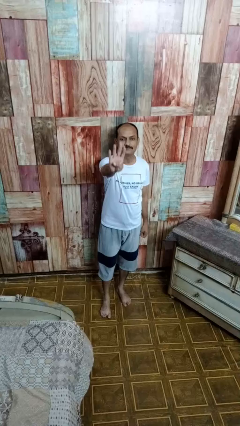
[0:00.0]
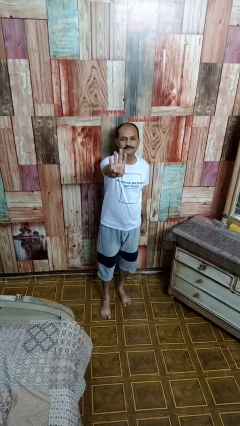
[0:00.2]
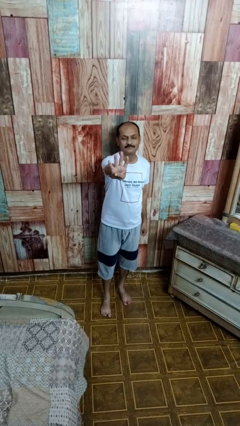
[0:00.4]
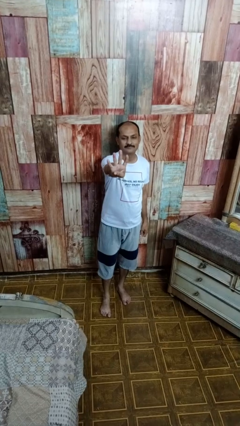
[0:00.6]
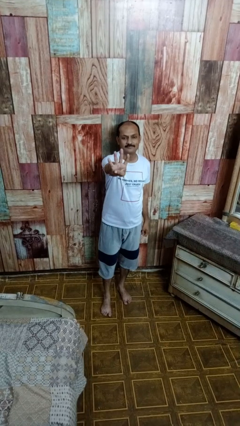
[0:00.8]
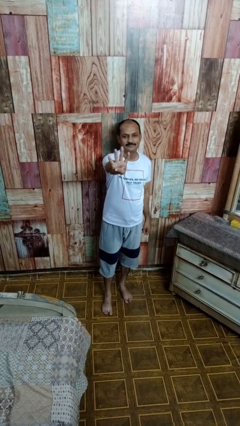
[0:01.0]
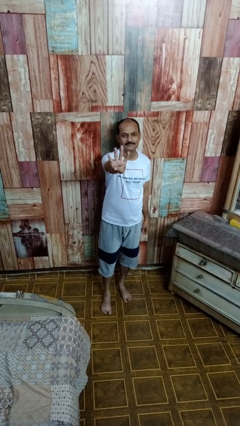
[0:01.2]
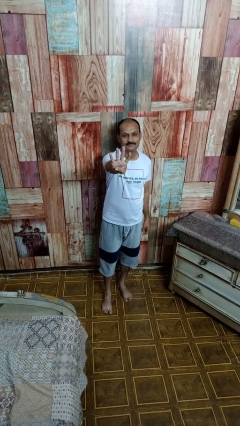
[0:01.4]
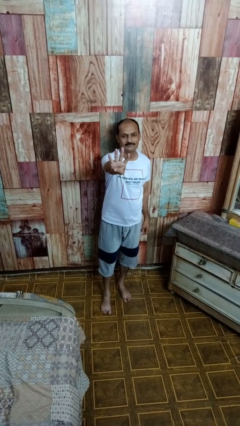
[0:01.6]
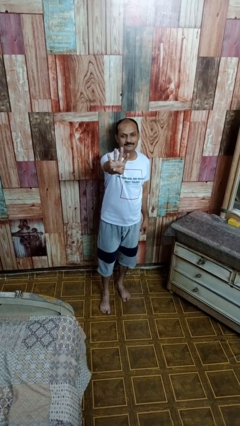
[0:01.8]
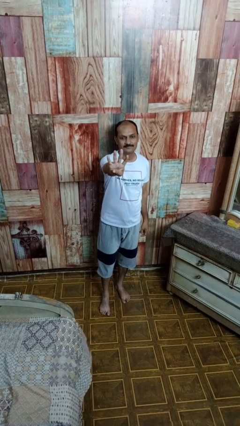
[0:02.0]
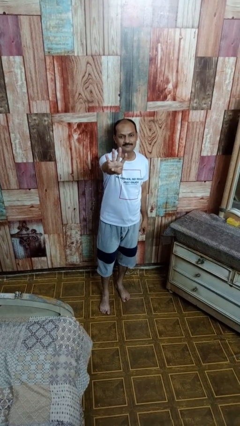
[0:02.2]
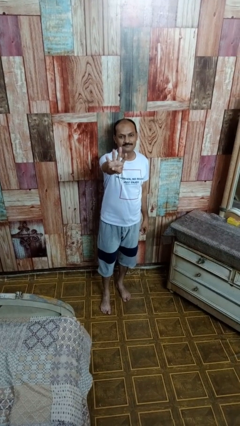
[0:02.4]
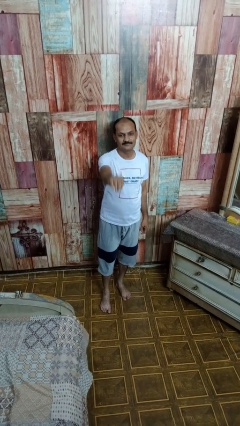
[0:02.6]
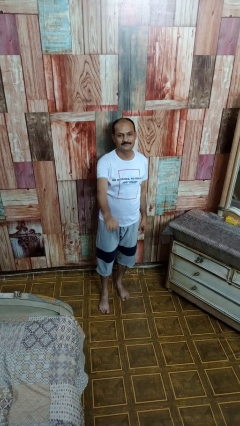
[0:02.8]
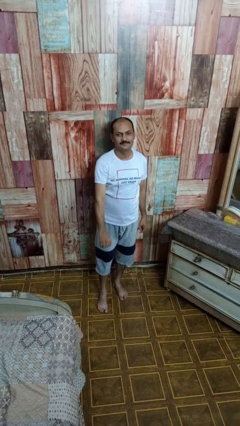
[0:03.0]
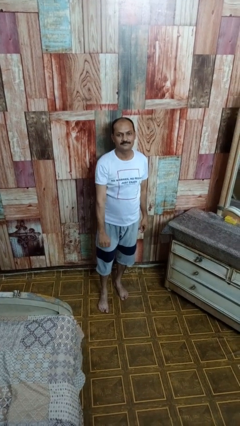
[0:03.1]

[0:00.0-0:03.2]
person gestures number four

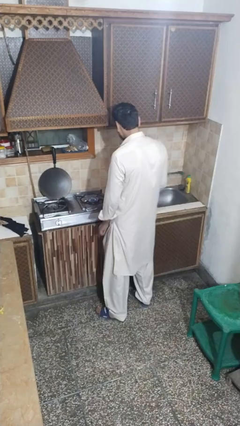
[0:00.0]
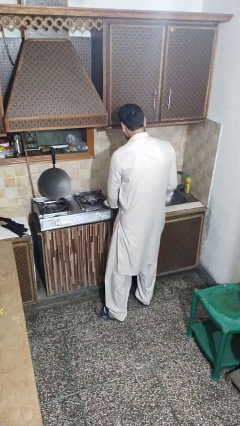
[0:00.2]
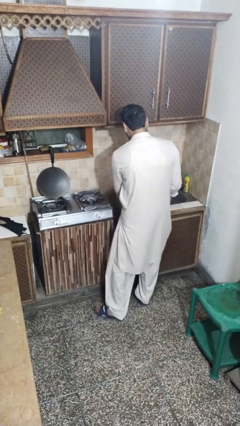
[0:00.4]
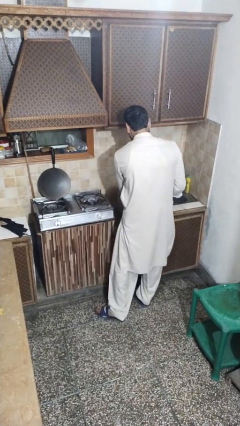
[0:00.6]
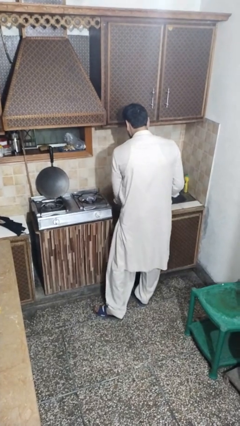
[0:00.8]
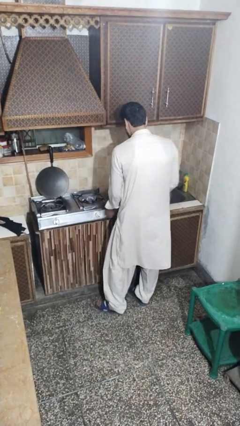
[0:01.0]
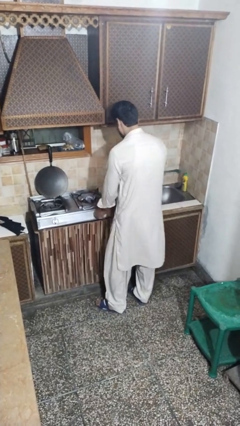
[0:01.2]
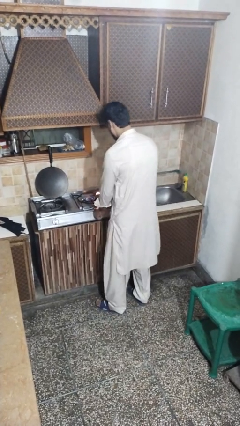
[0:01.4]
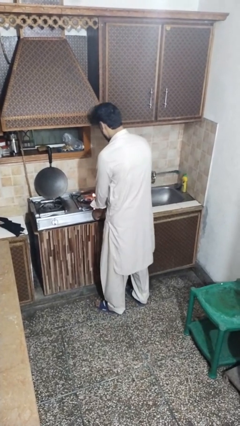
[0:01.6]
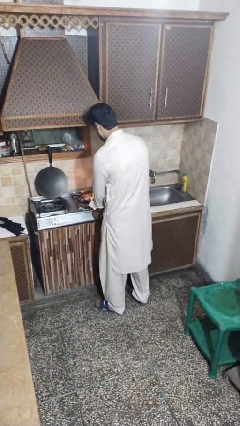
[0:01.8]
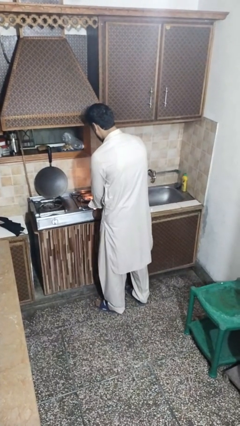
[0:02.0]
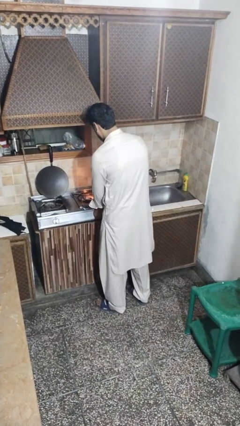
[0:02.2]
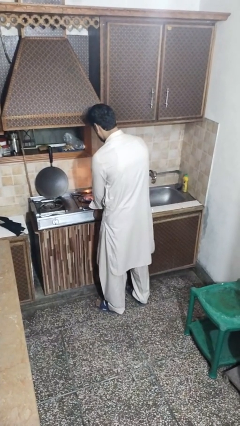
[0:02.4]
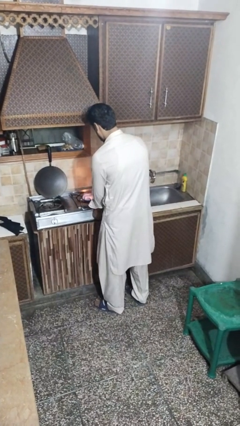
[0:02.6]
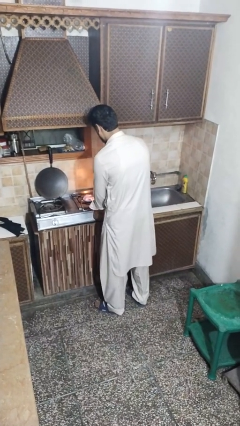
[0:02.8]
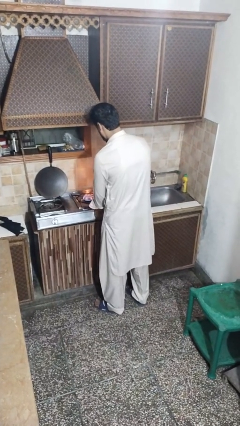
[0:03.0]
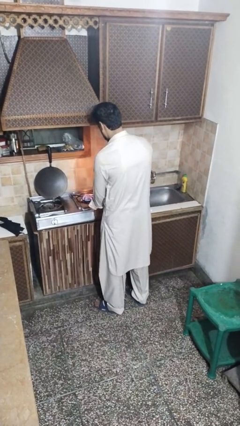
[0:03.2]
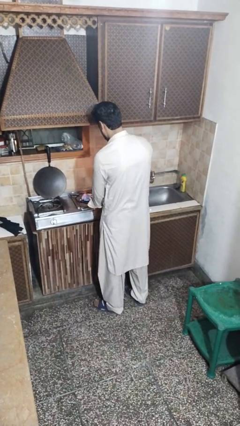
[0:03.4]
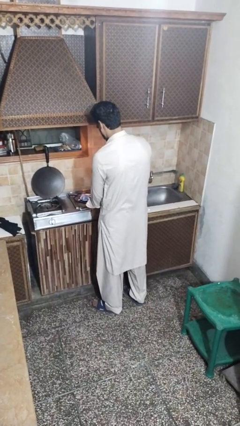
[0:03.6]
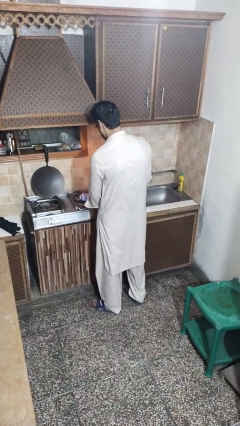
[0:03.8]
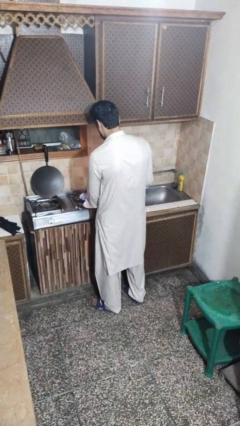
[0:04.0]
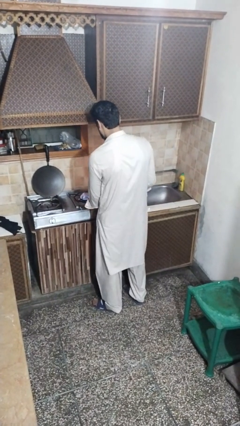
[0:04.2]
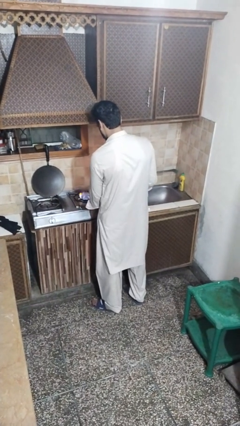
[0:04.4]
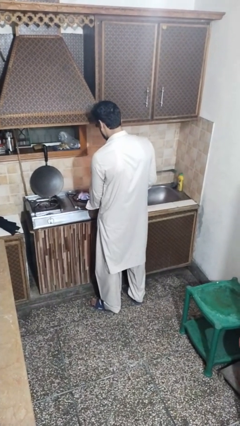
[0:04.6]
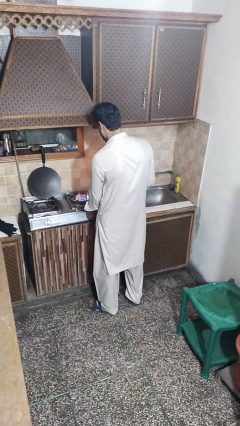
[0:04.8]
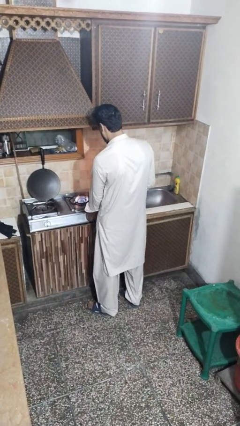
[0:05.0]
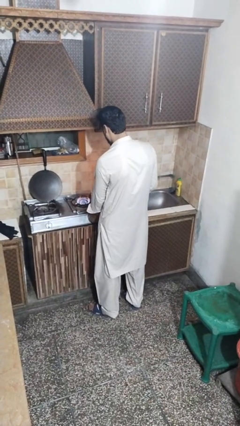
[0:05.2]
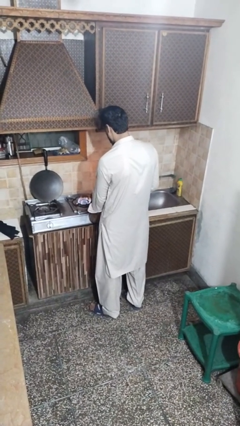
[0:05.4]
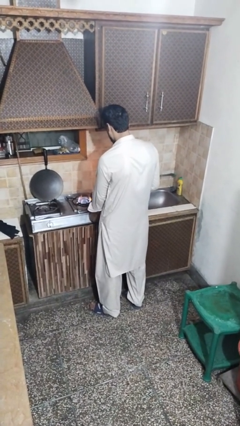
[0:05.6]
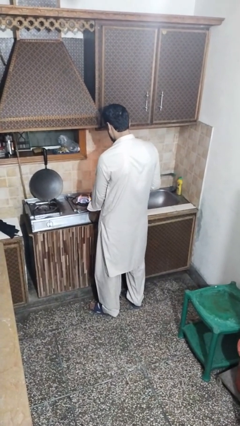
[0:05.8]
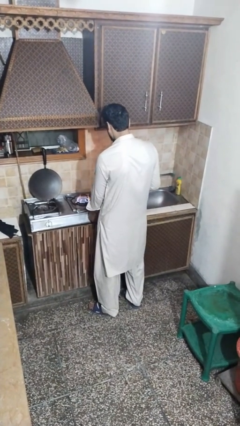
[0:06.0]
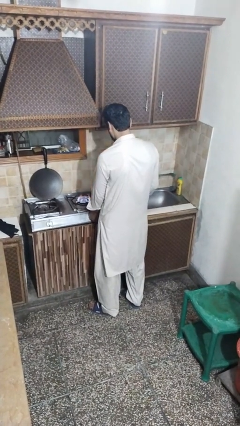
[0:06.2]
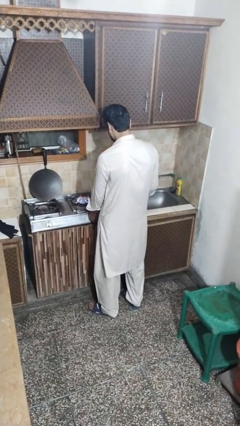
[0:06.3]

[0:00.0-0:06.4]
person turns on stovetop

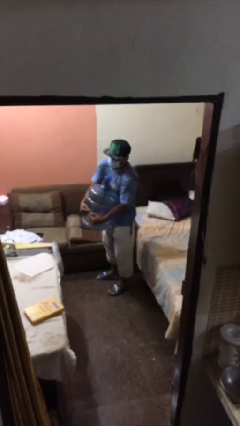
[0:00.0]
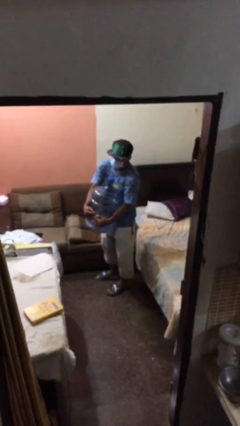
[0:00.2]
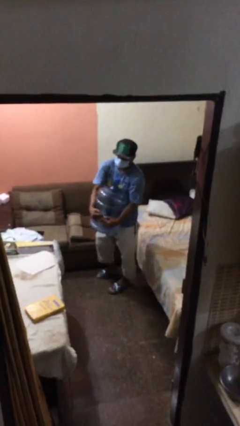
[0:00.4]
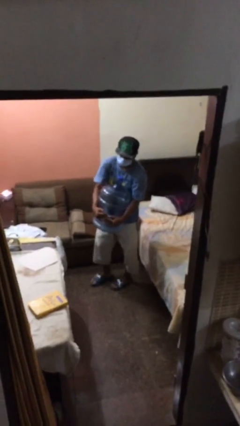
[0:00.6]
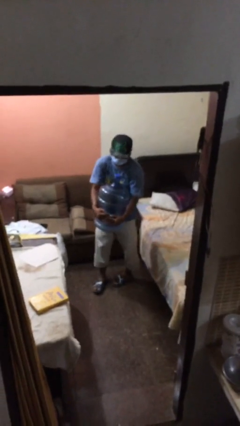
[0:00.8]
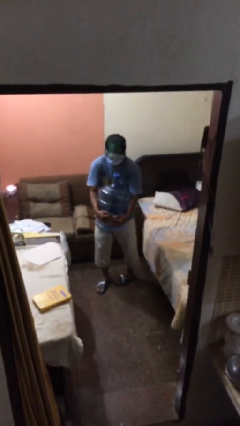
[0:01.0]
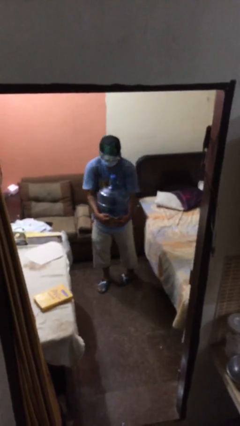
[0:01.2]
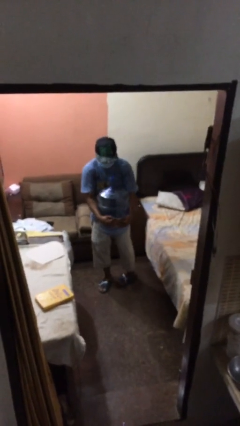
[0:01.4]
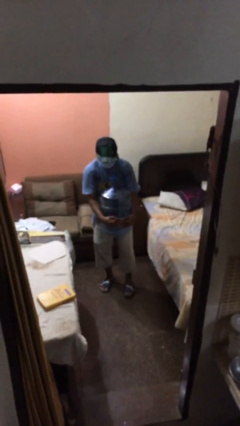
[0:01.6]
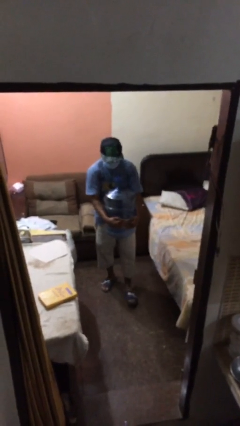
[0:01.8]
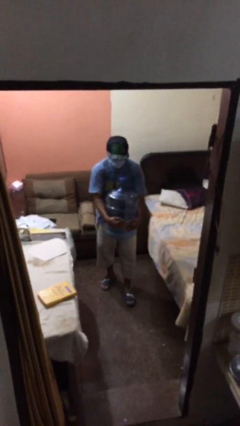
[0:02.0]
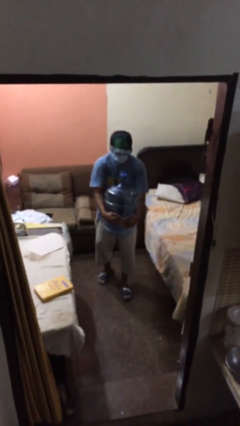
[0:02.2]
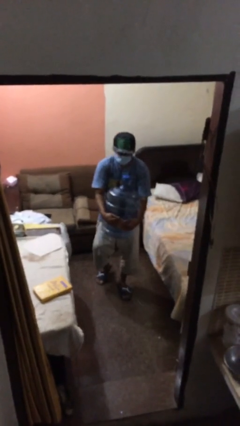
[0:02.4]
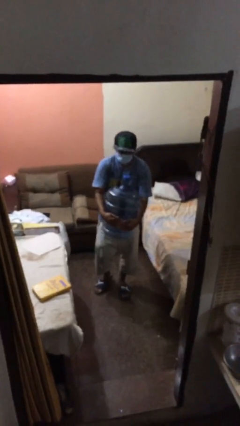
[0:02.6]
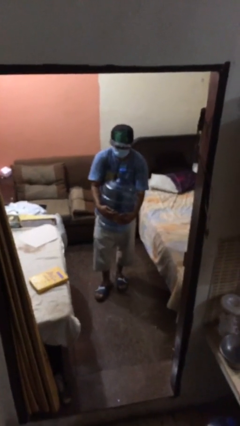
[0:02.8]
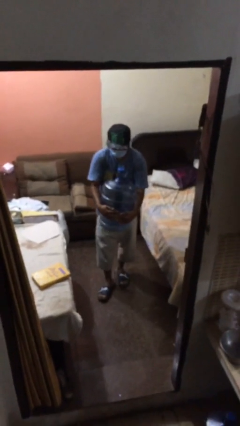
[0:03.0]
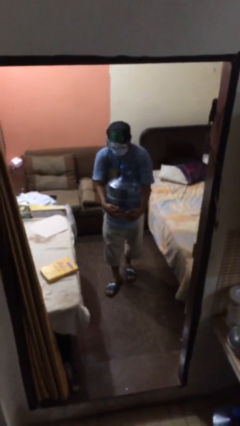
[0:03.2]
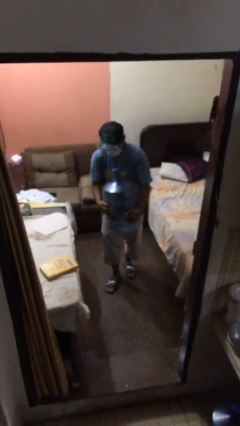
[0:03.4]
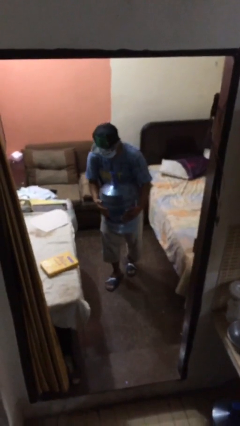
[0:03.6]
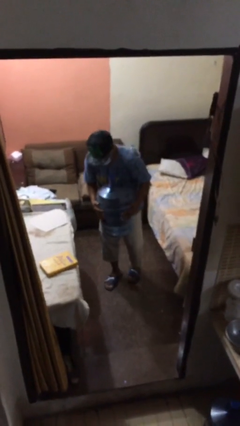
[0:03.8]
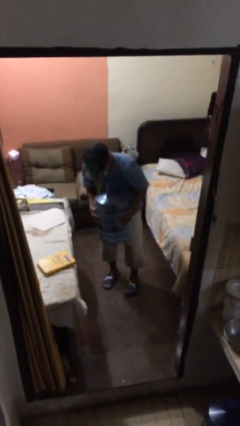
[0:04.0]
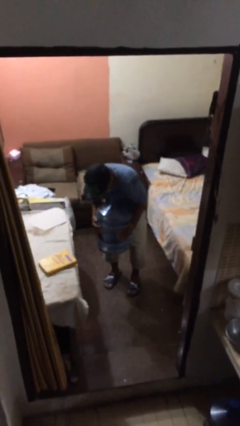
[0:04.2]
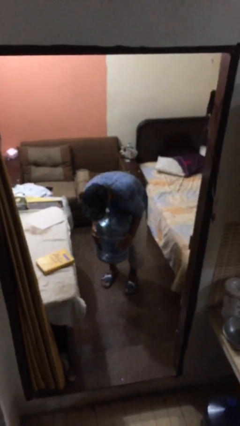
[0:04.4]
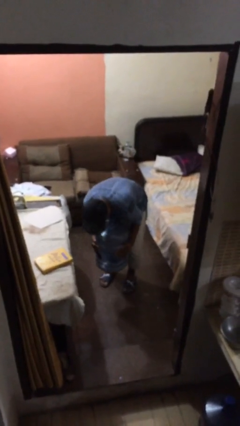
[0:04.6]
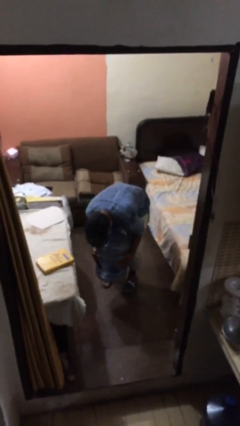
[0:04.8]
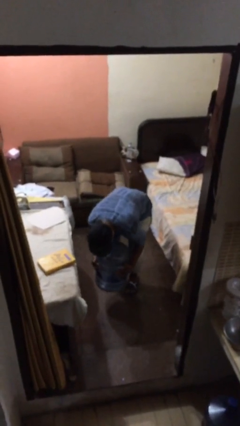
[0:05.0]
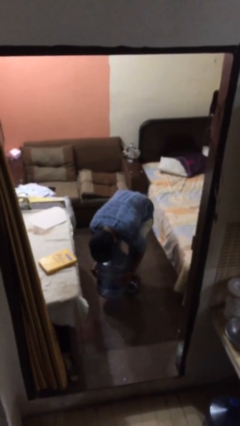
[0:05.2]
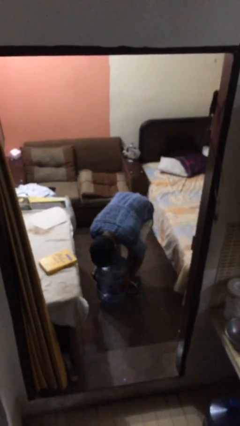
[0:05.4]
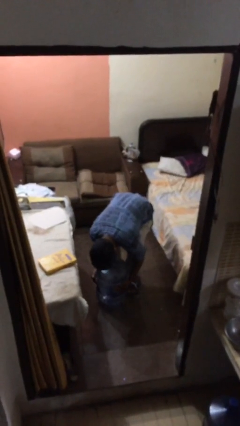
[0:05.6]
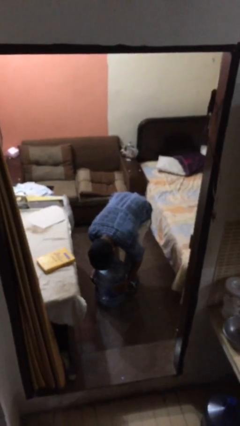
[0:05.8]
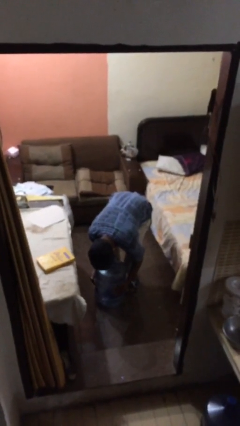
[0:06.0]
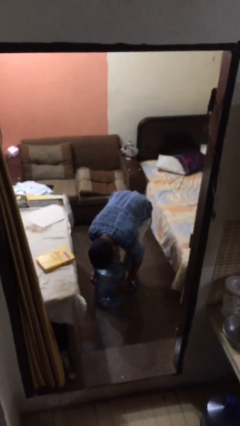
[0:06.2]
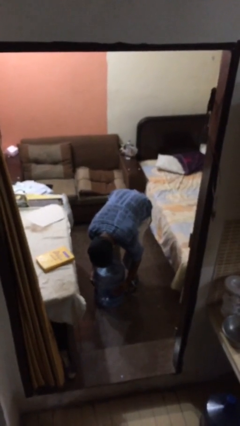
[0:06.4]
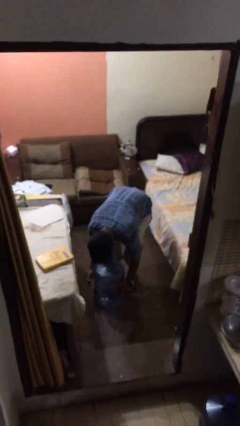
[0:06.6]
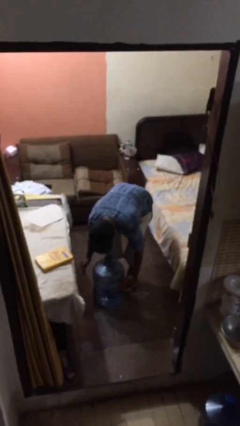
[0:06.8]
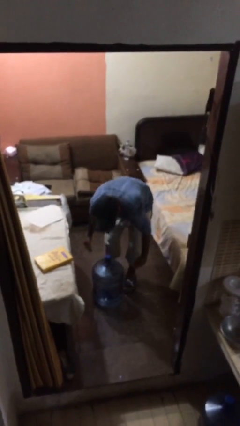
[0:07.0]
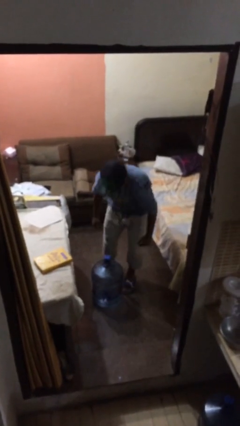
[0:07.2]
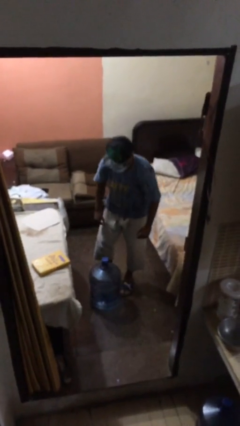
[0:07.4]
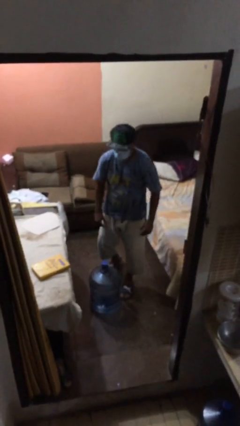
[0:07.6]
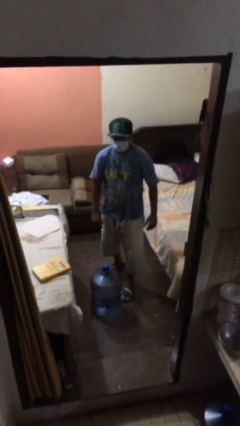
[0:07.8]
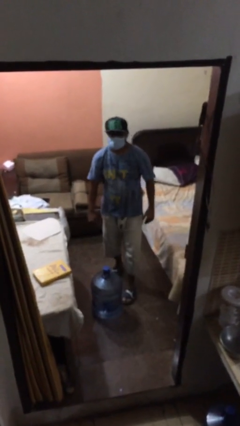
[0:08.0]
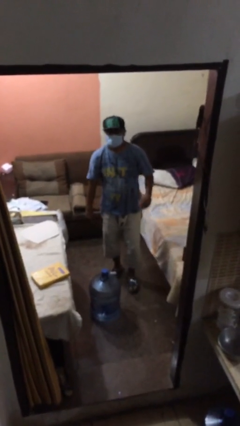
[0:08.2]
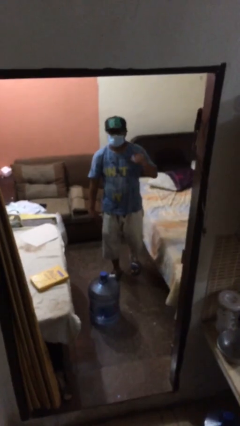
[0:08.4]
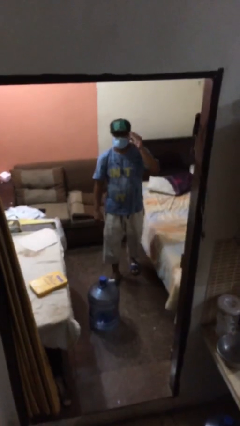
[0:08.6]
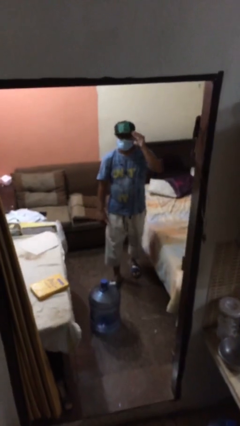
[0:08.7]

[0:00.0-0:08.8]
person carries heavy object
